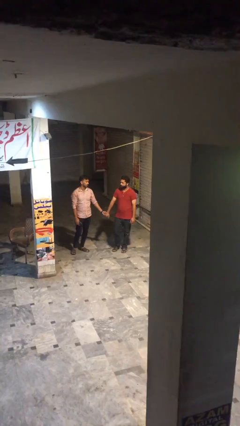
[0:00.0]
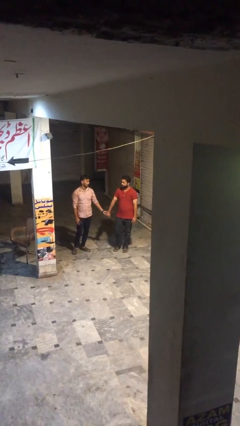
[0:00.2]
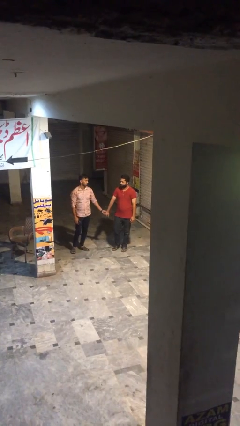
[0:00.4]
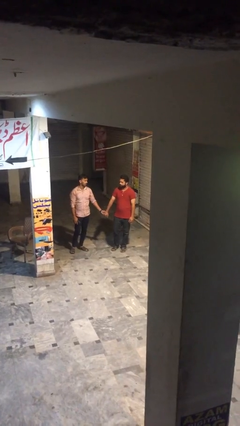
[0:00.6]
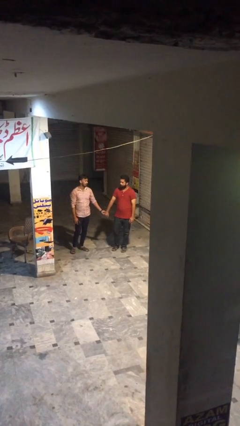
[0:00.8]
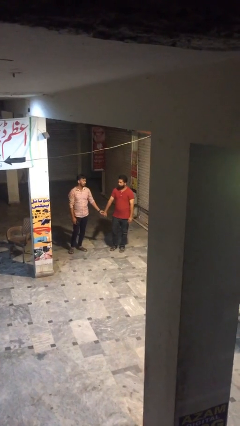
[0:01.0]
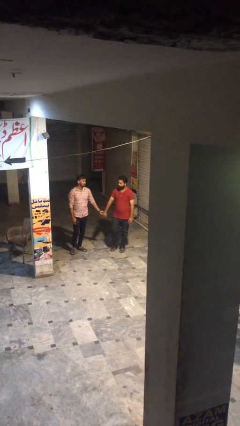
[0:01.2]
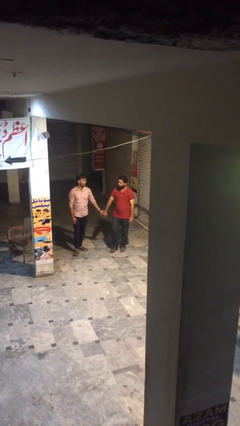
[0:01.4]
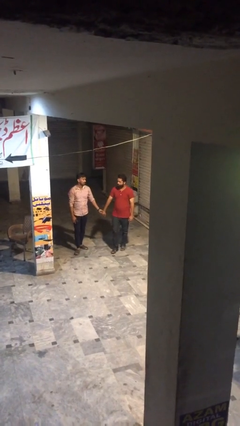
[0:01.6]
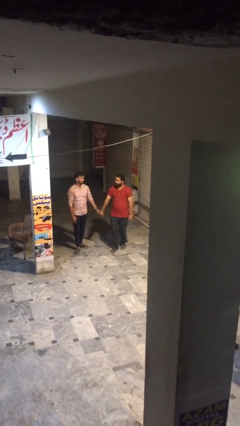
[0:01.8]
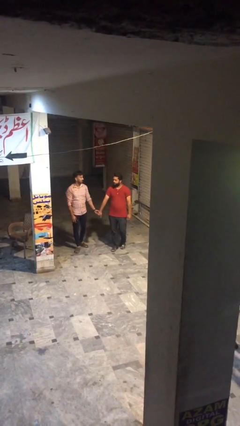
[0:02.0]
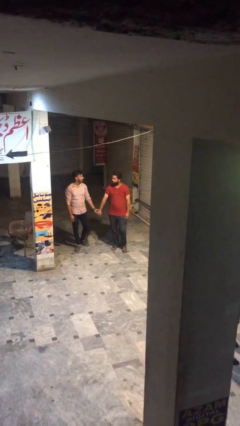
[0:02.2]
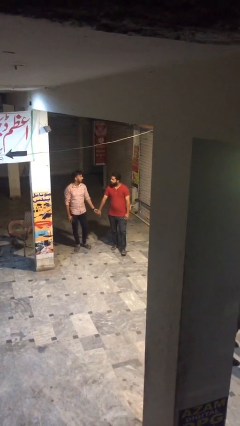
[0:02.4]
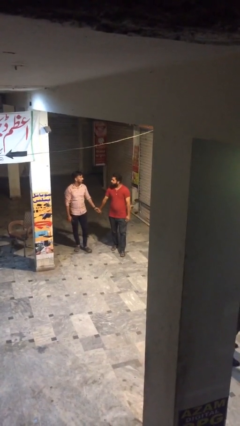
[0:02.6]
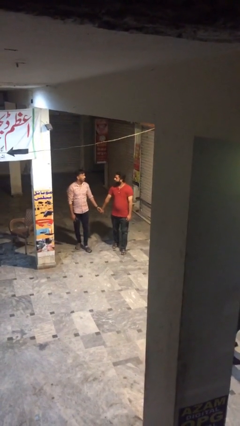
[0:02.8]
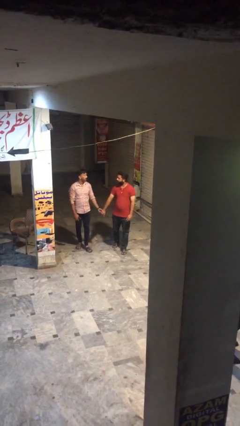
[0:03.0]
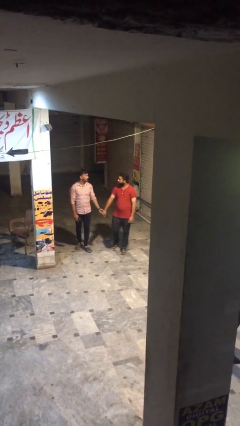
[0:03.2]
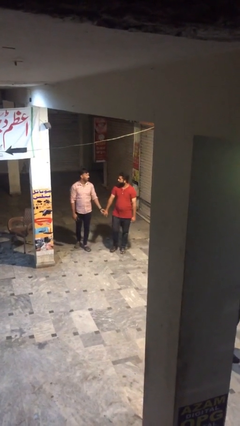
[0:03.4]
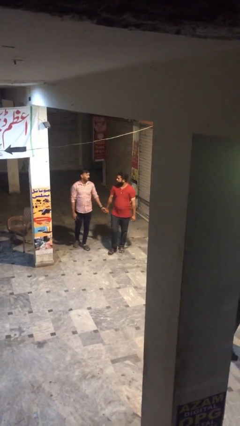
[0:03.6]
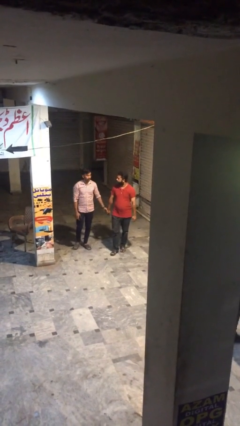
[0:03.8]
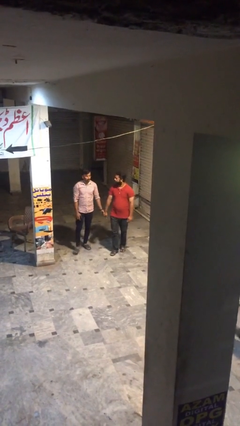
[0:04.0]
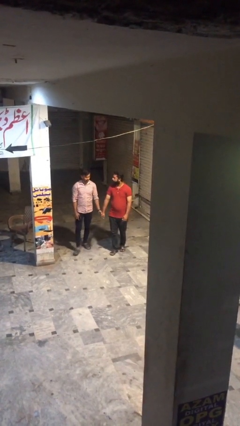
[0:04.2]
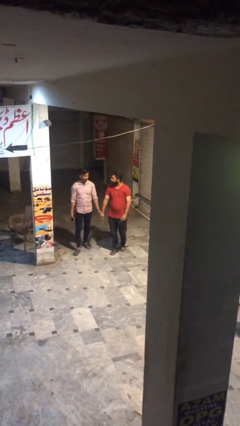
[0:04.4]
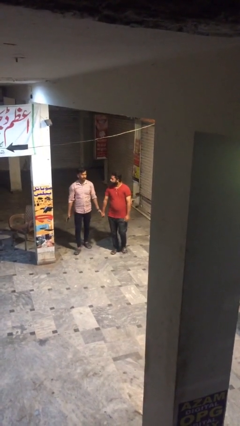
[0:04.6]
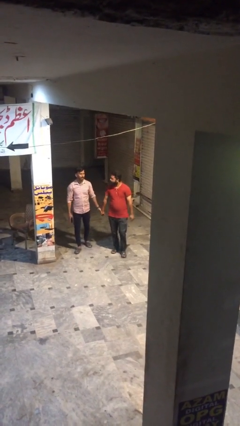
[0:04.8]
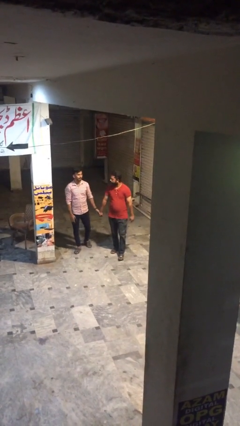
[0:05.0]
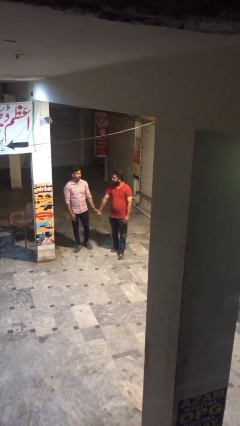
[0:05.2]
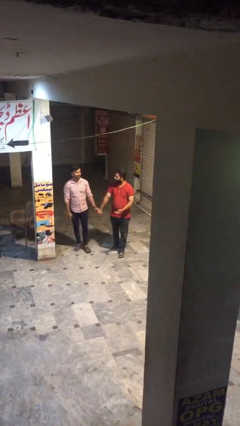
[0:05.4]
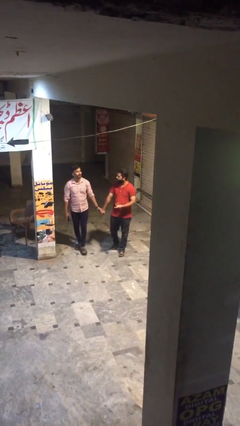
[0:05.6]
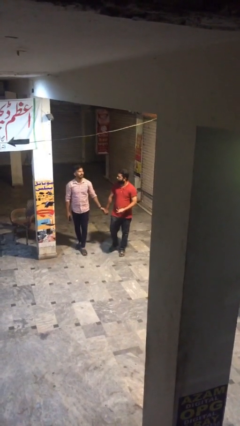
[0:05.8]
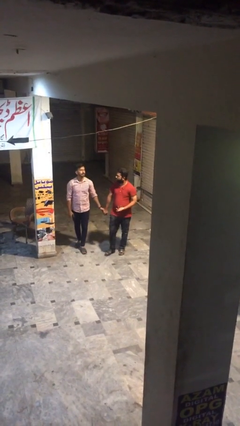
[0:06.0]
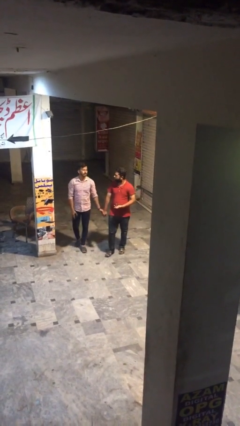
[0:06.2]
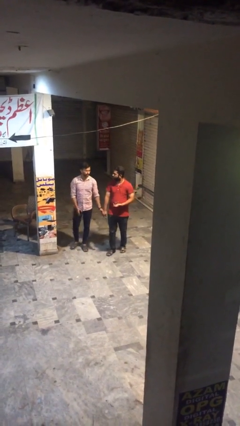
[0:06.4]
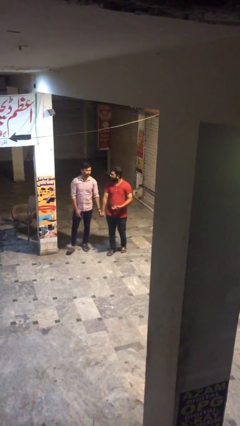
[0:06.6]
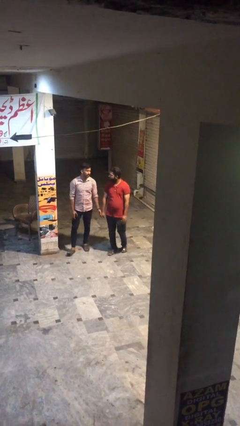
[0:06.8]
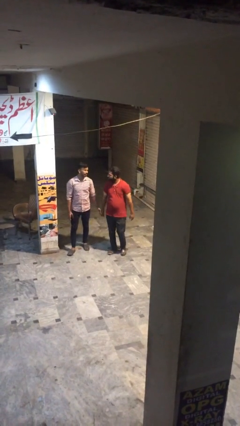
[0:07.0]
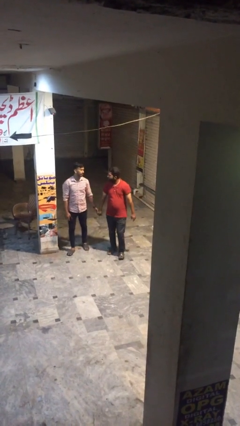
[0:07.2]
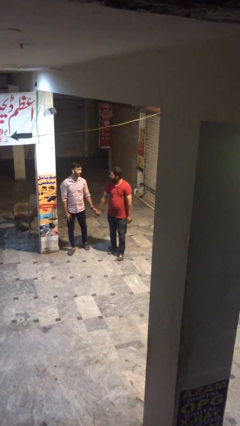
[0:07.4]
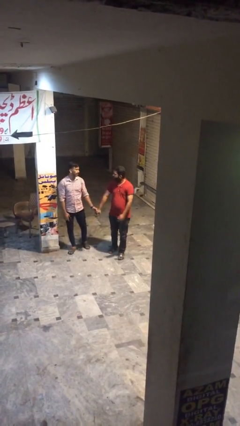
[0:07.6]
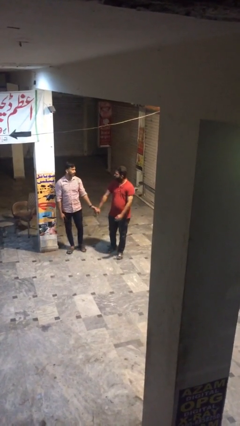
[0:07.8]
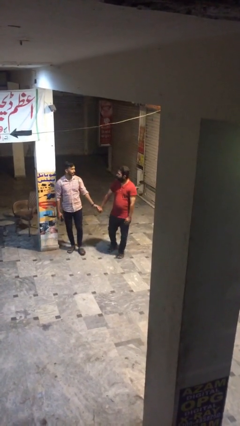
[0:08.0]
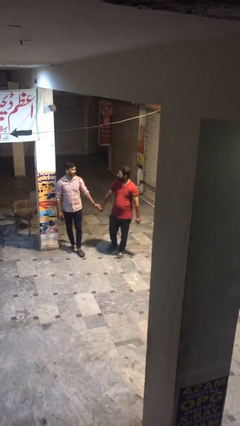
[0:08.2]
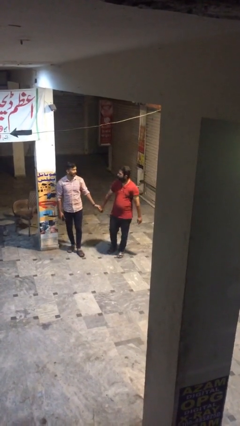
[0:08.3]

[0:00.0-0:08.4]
person holds hand

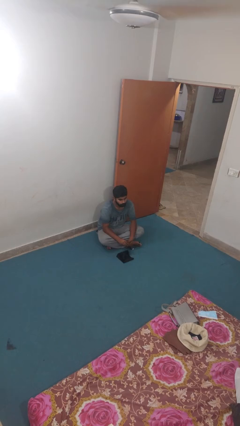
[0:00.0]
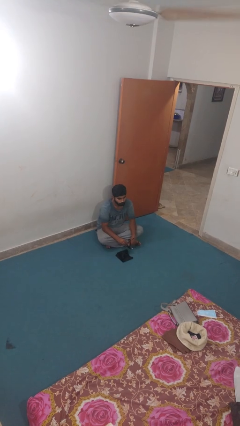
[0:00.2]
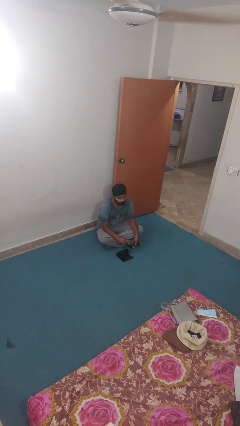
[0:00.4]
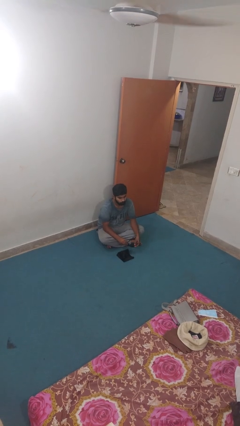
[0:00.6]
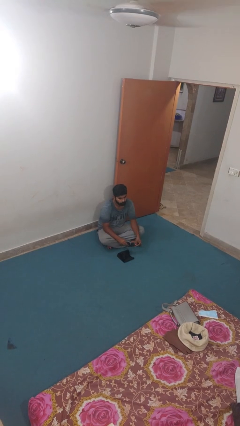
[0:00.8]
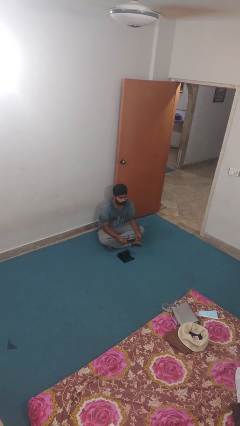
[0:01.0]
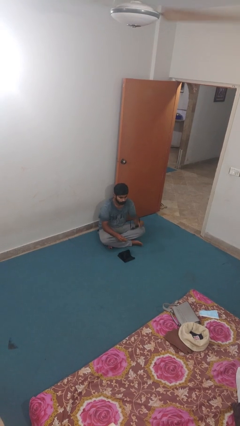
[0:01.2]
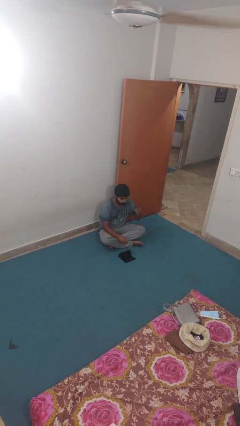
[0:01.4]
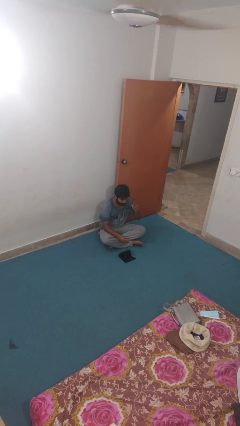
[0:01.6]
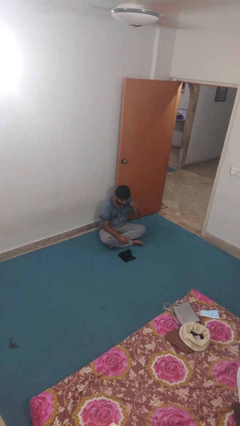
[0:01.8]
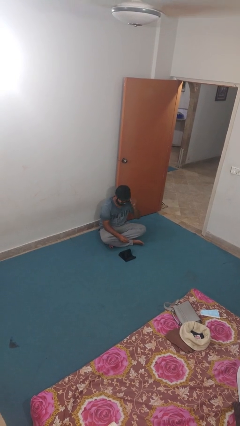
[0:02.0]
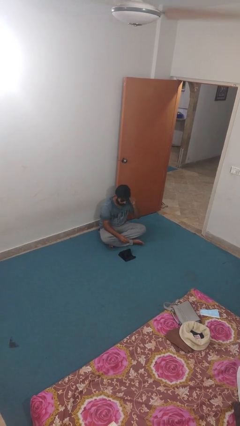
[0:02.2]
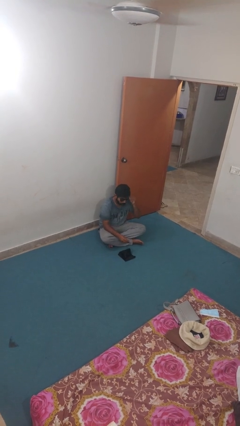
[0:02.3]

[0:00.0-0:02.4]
person puts on sunglasses

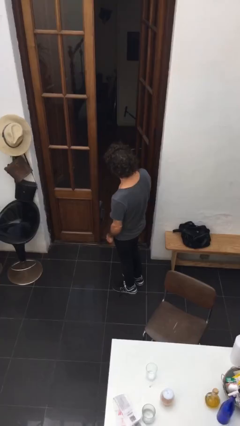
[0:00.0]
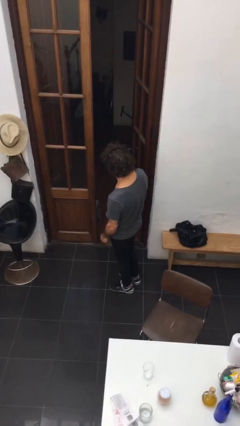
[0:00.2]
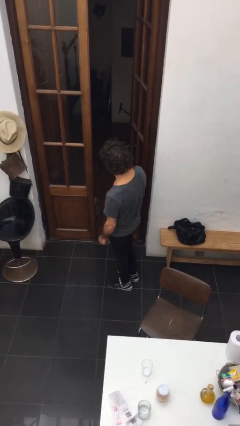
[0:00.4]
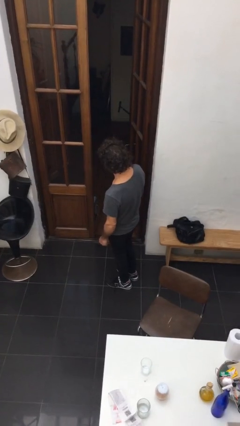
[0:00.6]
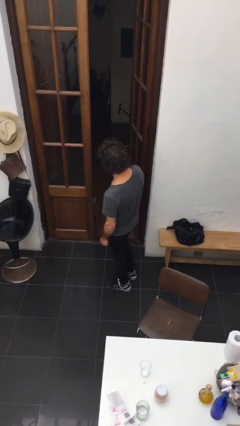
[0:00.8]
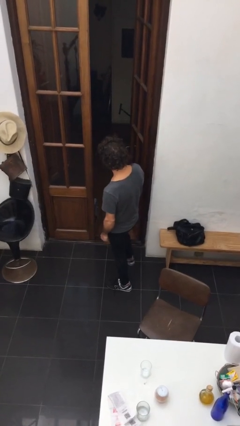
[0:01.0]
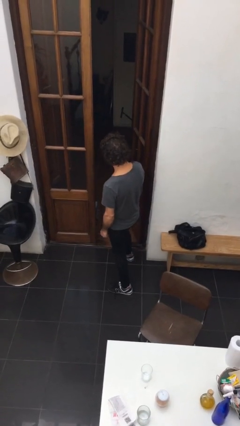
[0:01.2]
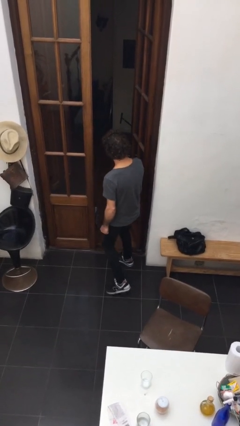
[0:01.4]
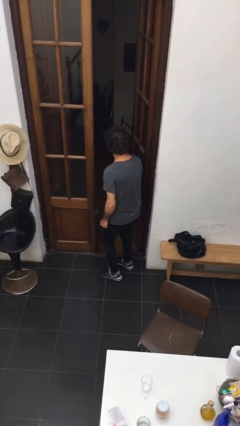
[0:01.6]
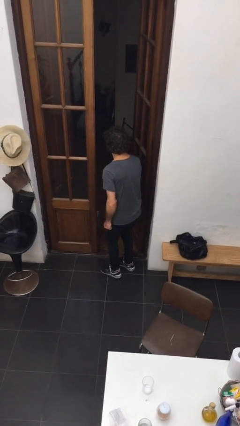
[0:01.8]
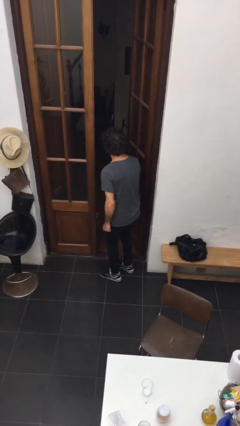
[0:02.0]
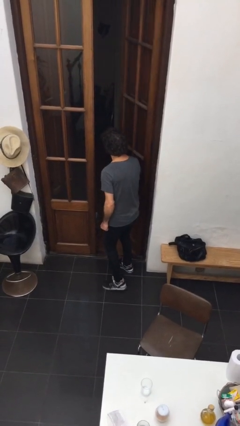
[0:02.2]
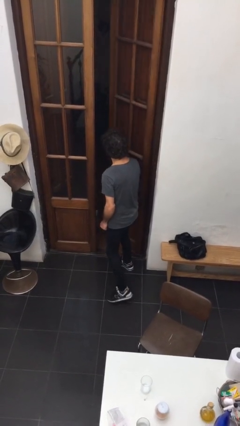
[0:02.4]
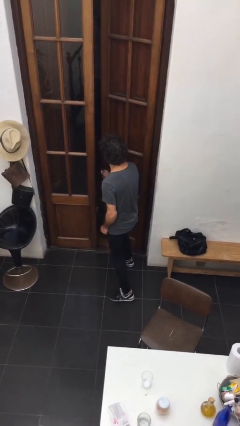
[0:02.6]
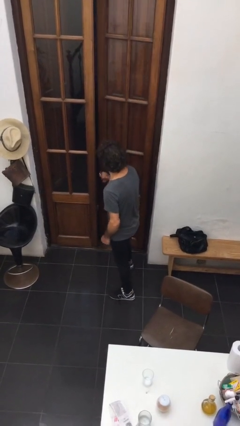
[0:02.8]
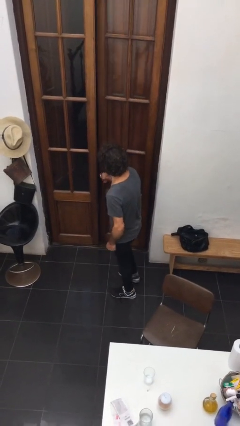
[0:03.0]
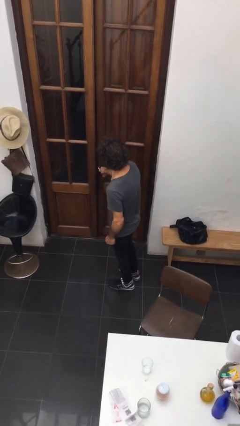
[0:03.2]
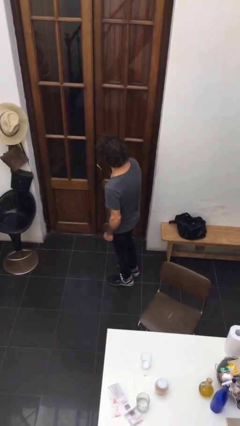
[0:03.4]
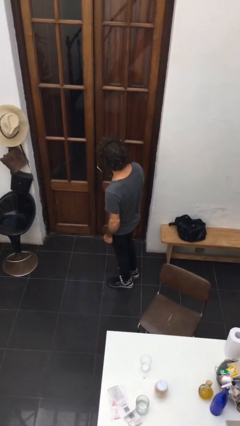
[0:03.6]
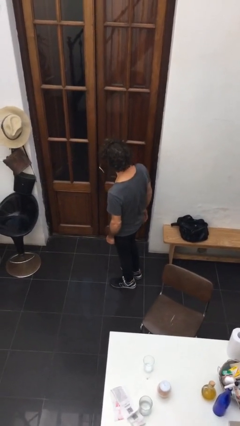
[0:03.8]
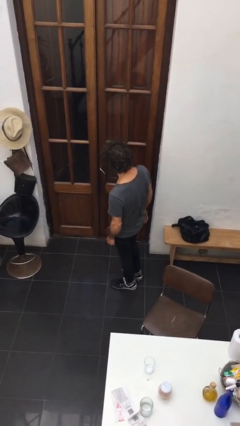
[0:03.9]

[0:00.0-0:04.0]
person closes facility door

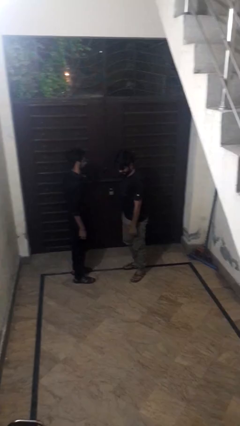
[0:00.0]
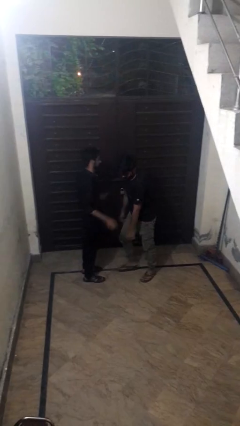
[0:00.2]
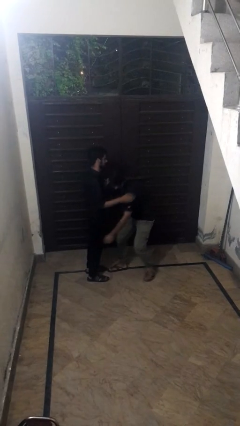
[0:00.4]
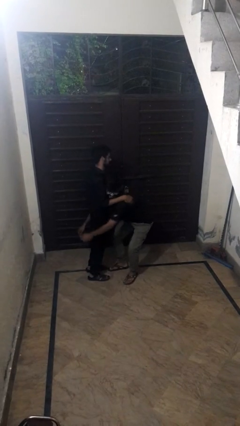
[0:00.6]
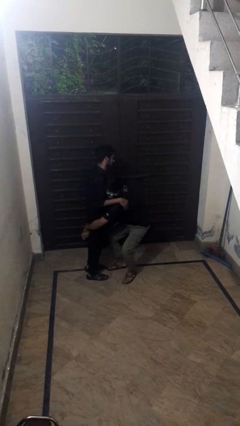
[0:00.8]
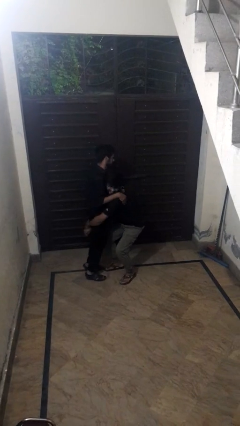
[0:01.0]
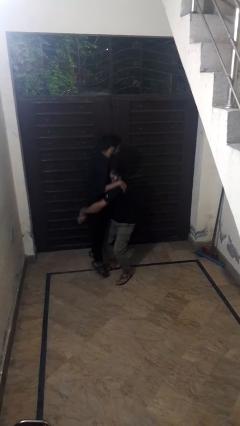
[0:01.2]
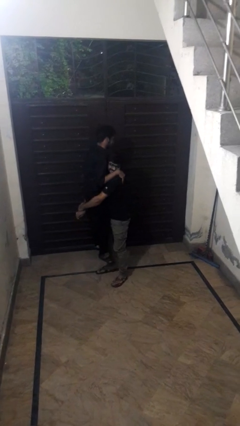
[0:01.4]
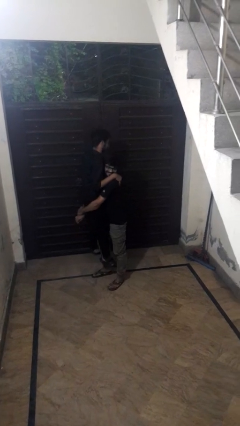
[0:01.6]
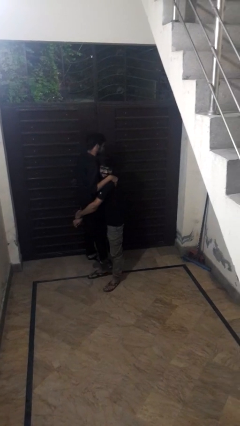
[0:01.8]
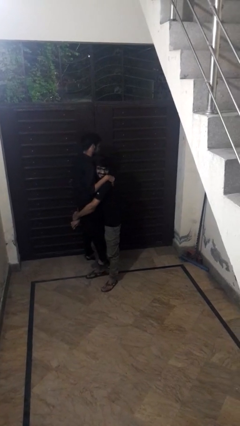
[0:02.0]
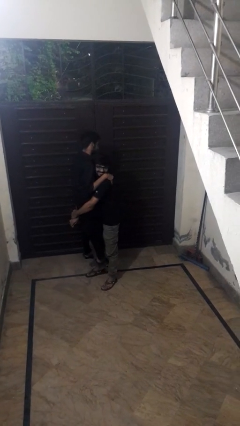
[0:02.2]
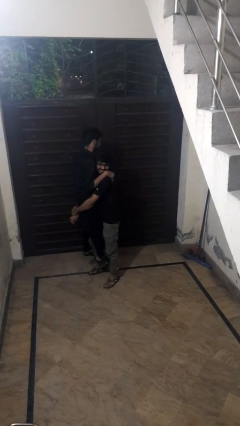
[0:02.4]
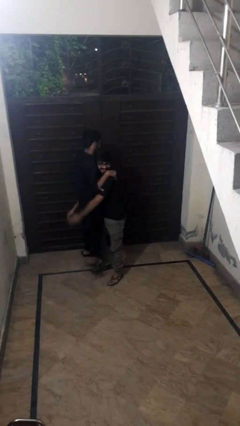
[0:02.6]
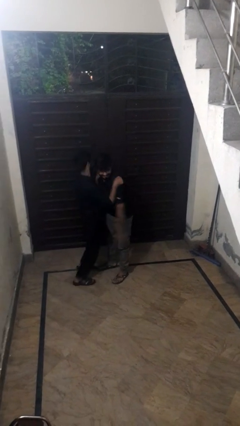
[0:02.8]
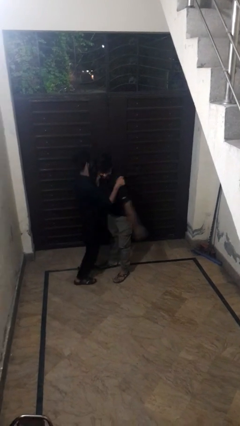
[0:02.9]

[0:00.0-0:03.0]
person picks up person

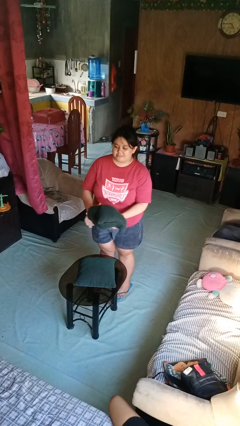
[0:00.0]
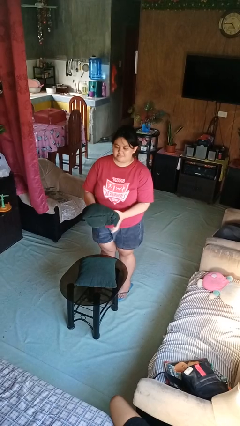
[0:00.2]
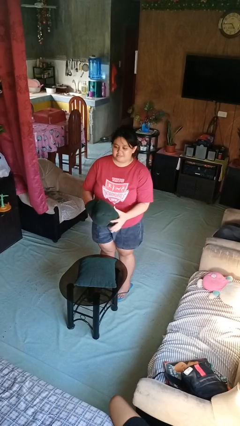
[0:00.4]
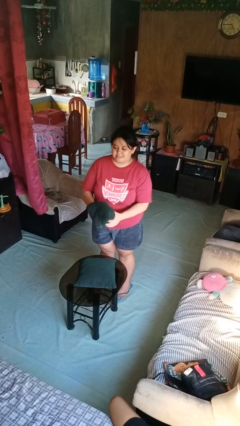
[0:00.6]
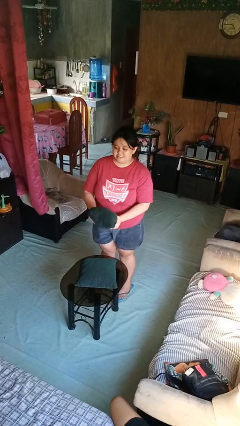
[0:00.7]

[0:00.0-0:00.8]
person squeezes object
